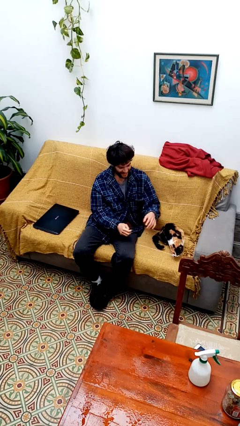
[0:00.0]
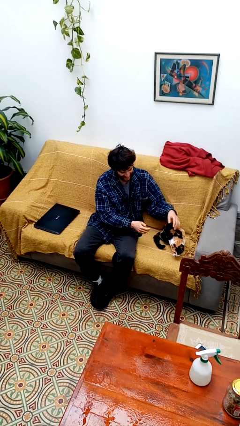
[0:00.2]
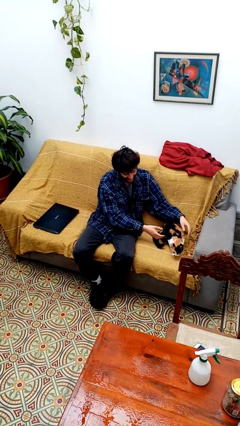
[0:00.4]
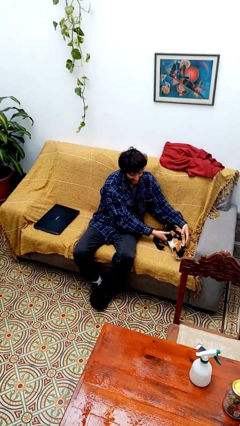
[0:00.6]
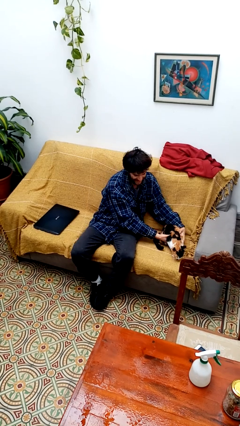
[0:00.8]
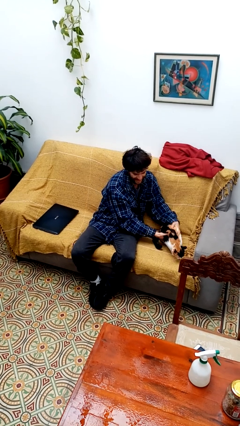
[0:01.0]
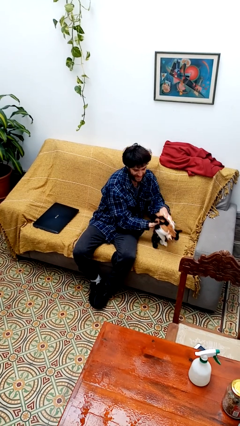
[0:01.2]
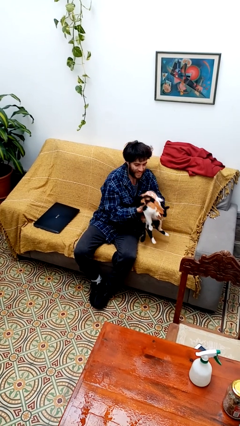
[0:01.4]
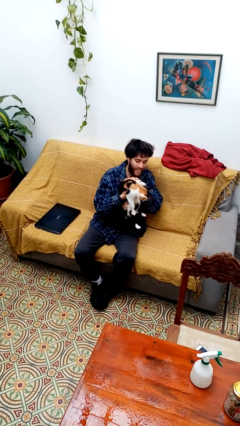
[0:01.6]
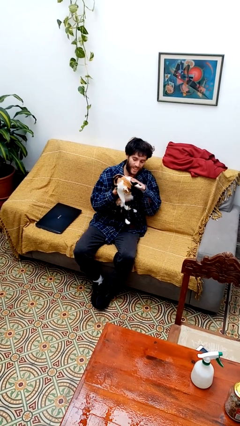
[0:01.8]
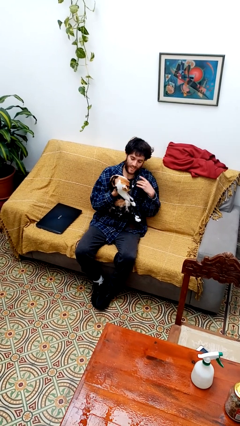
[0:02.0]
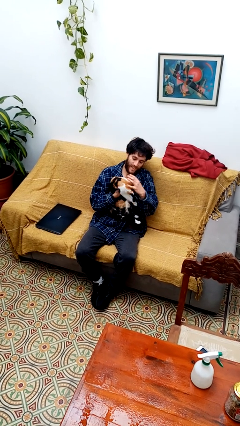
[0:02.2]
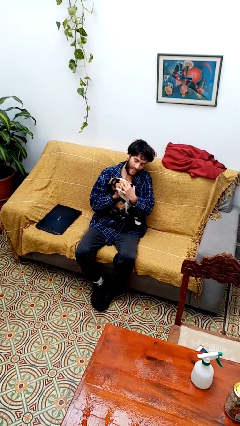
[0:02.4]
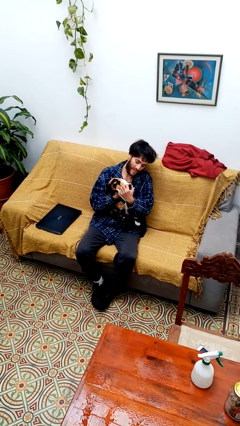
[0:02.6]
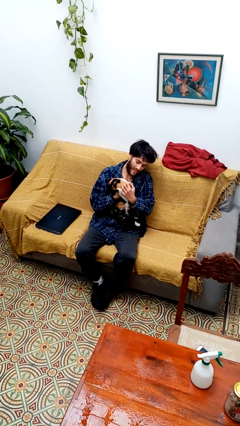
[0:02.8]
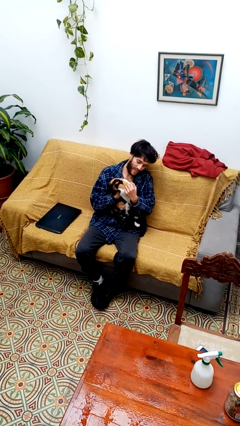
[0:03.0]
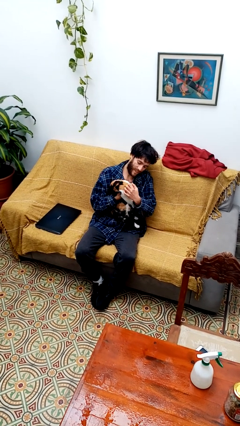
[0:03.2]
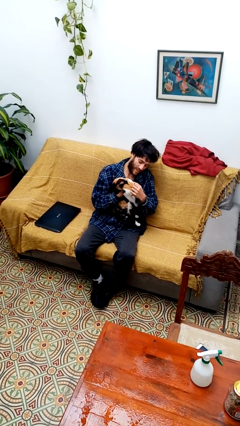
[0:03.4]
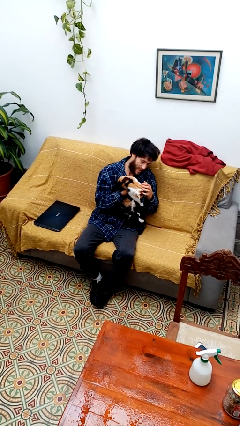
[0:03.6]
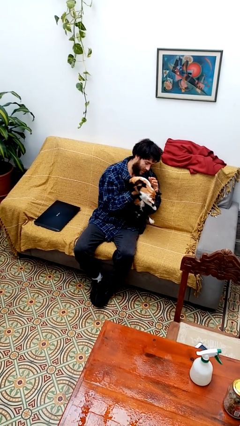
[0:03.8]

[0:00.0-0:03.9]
person hugs cat

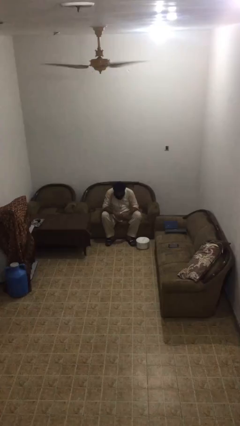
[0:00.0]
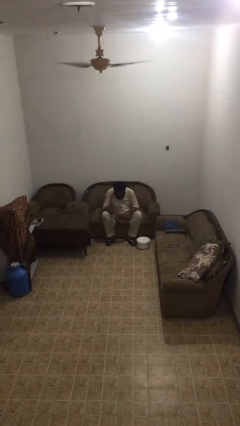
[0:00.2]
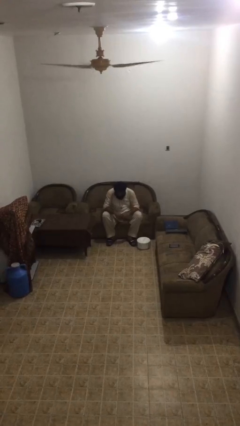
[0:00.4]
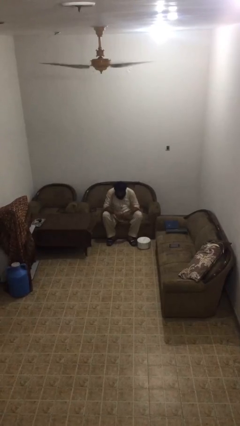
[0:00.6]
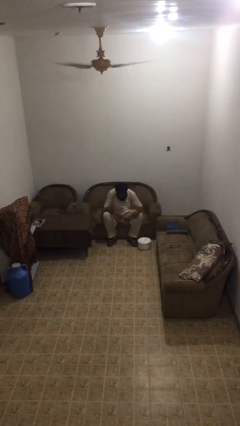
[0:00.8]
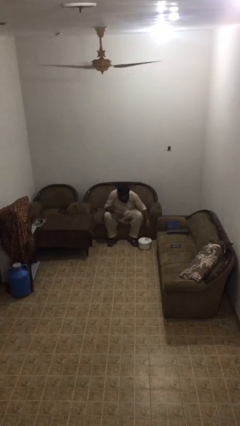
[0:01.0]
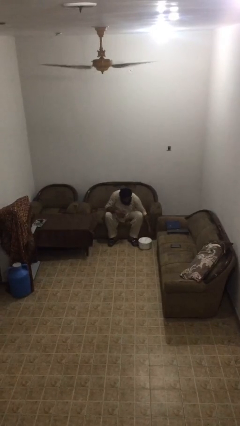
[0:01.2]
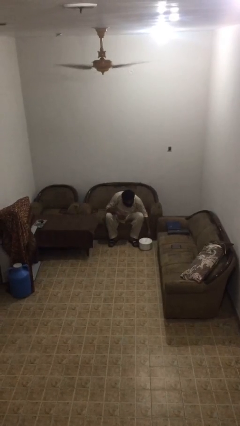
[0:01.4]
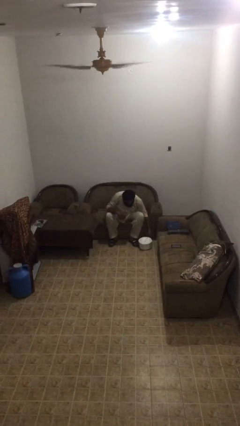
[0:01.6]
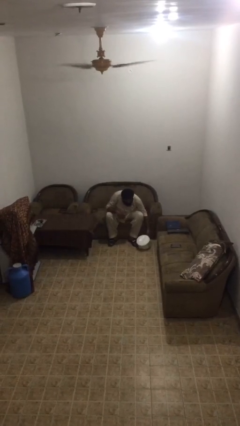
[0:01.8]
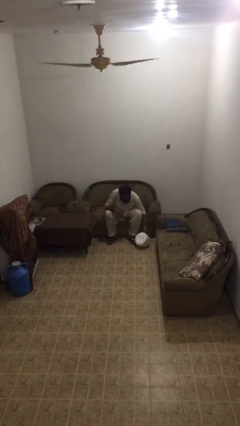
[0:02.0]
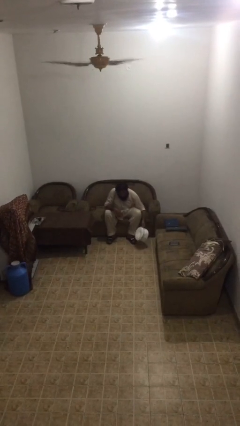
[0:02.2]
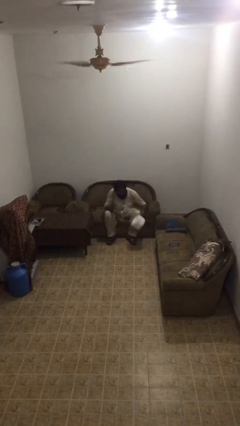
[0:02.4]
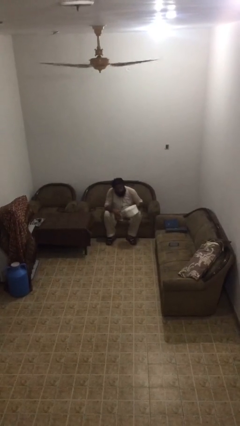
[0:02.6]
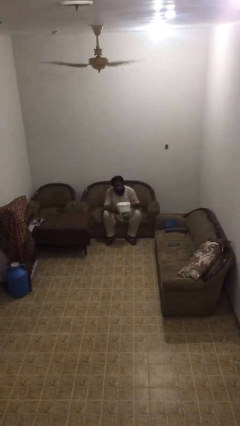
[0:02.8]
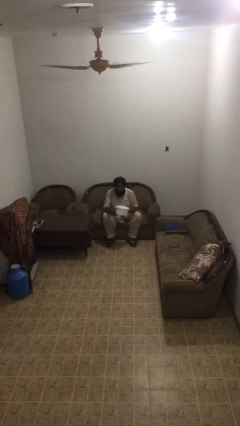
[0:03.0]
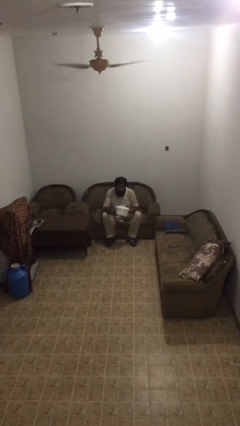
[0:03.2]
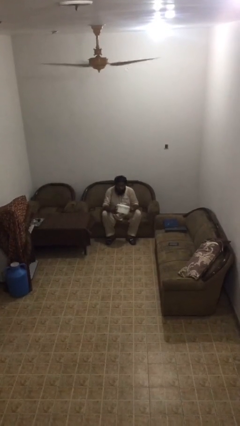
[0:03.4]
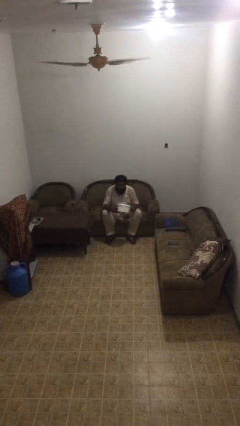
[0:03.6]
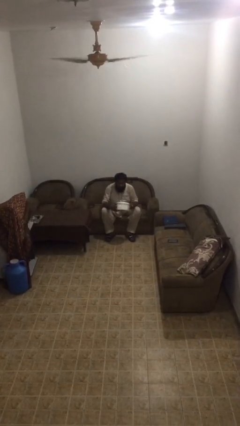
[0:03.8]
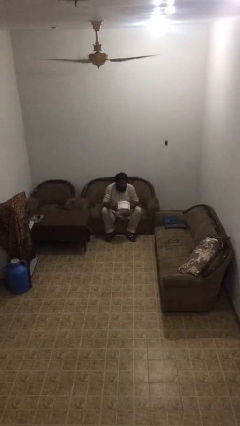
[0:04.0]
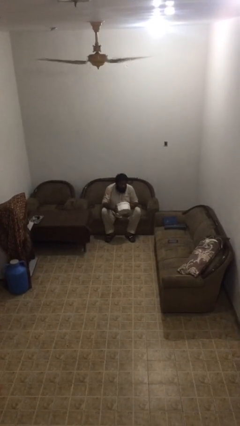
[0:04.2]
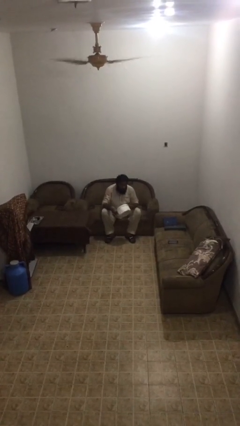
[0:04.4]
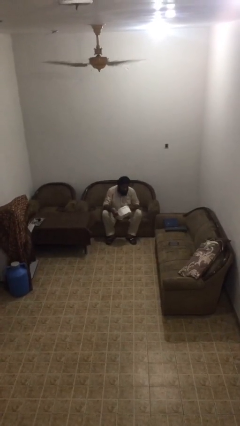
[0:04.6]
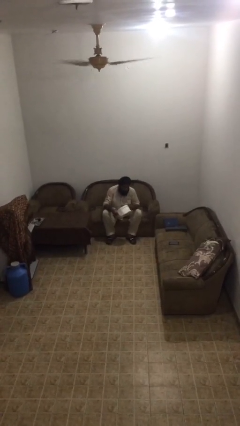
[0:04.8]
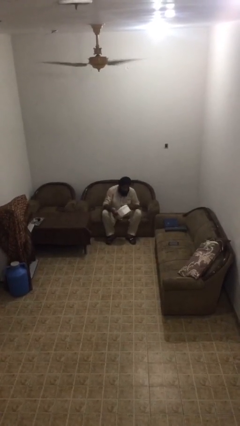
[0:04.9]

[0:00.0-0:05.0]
person picks up object from floor

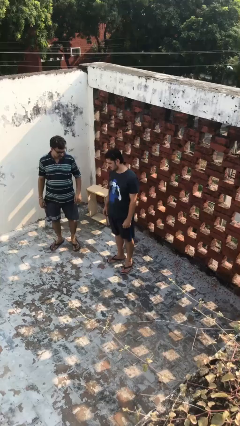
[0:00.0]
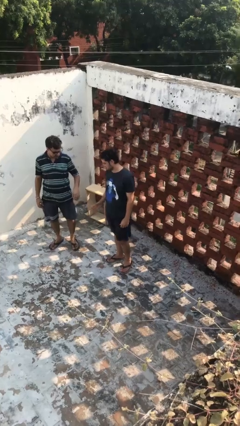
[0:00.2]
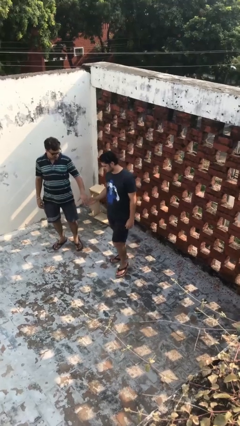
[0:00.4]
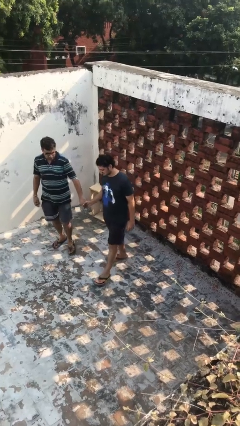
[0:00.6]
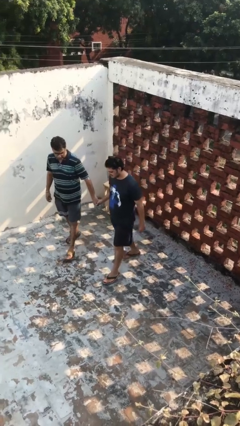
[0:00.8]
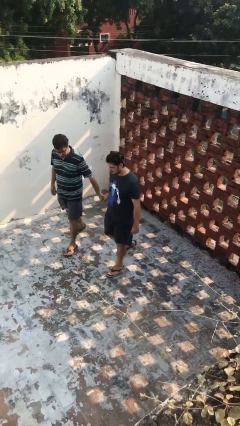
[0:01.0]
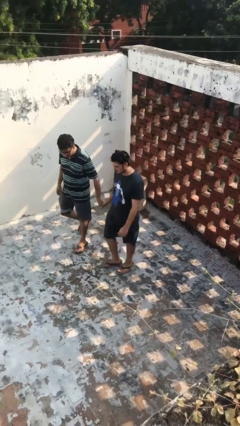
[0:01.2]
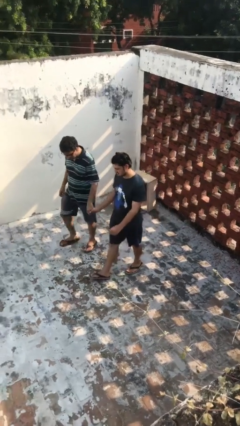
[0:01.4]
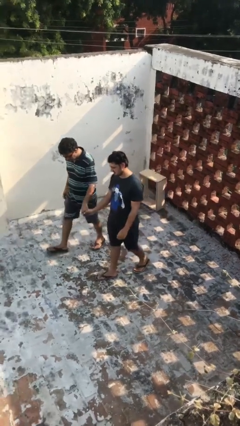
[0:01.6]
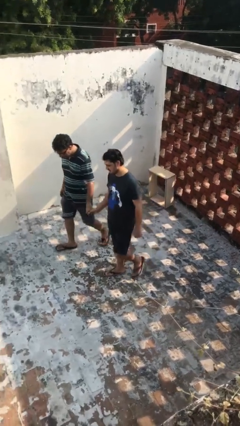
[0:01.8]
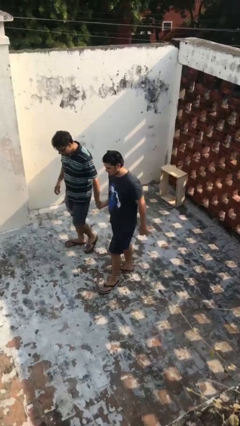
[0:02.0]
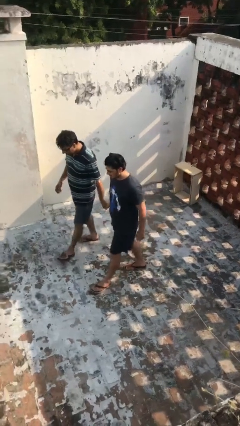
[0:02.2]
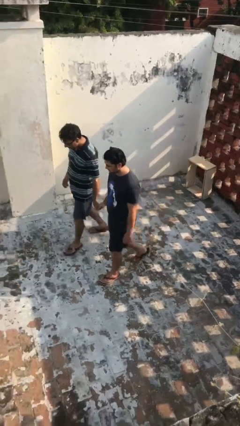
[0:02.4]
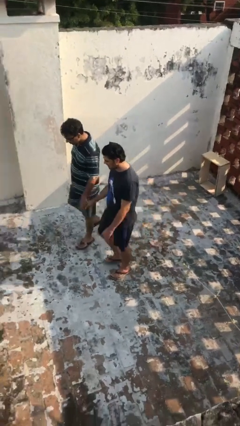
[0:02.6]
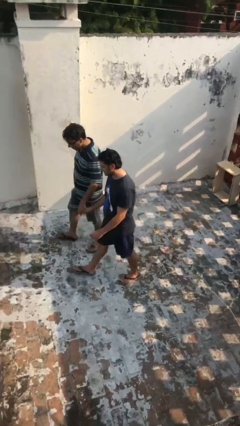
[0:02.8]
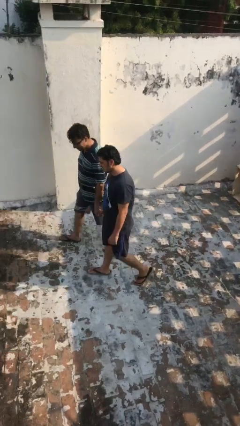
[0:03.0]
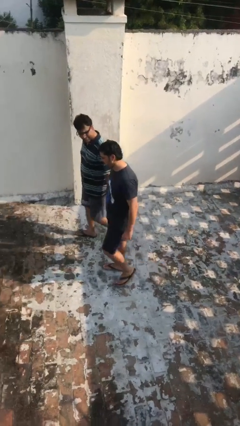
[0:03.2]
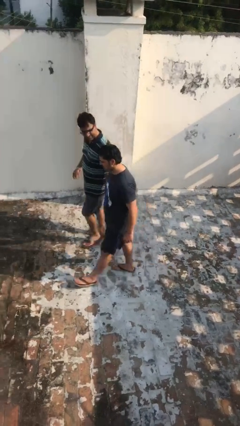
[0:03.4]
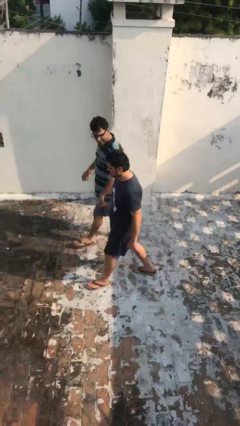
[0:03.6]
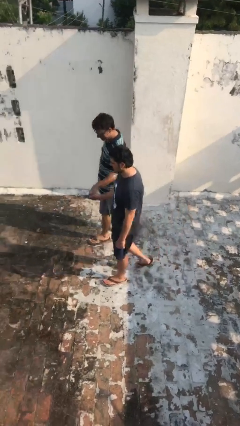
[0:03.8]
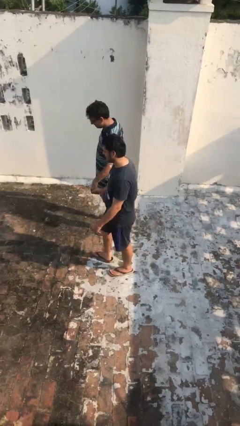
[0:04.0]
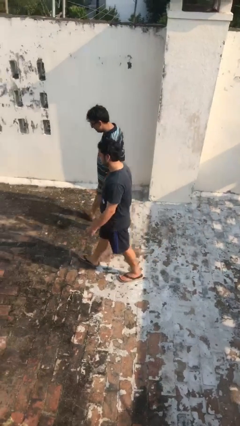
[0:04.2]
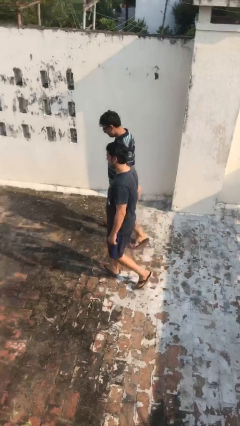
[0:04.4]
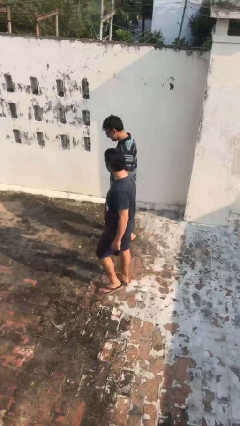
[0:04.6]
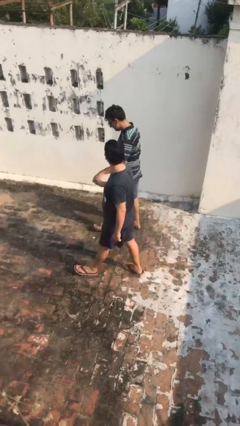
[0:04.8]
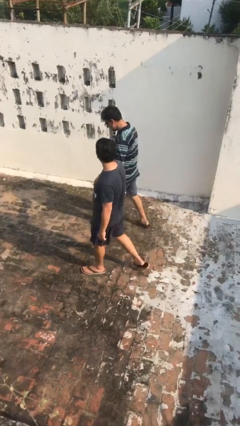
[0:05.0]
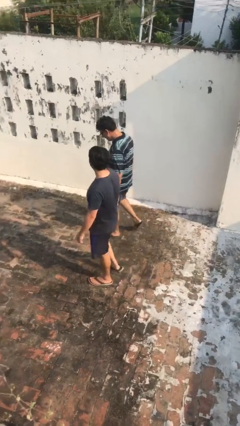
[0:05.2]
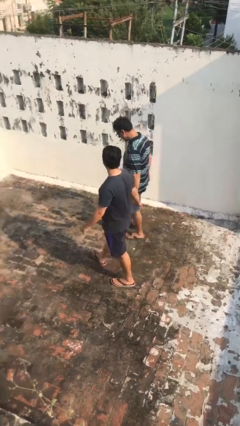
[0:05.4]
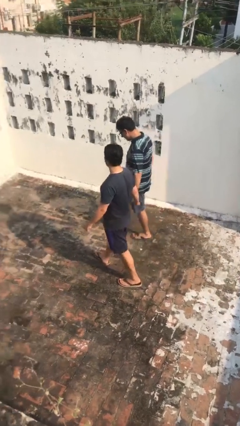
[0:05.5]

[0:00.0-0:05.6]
person holds hand

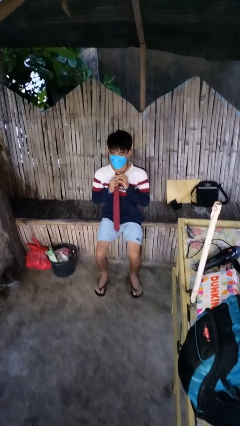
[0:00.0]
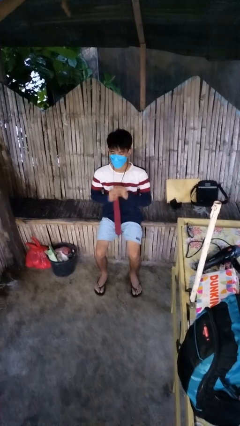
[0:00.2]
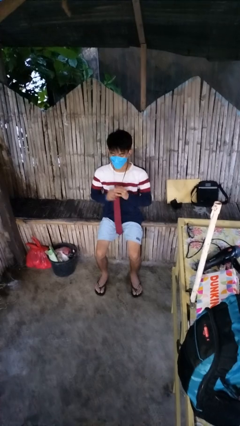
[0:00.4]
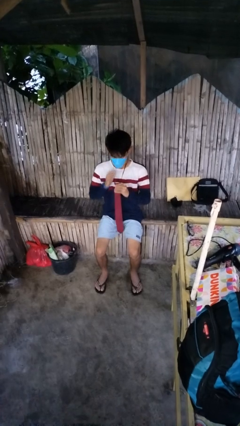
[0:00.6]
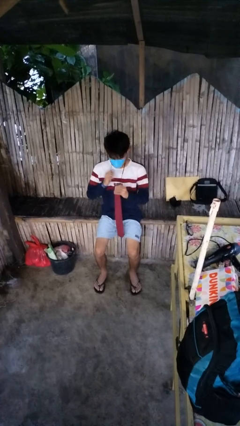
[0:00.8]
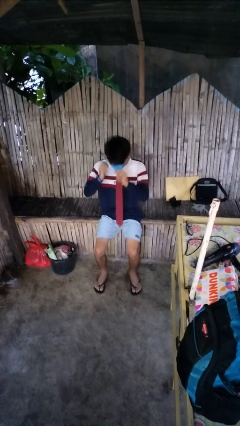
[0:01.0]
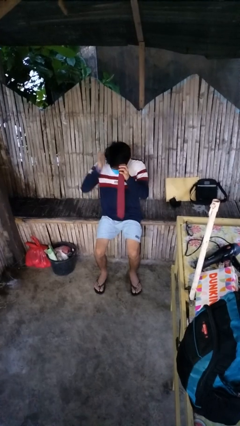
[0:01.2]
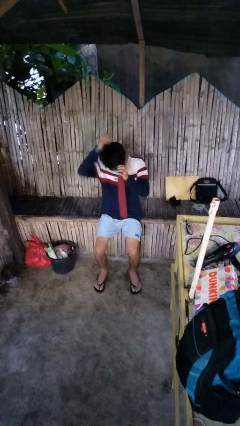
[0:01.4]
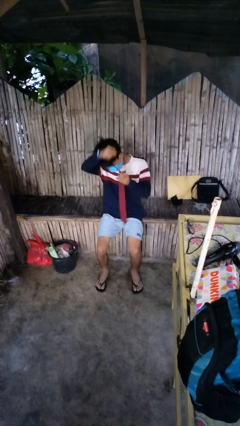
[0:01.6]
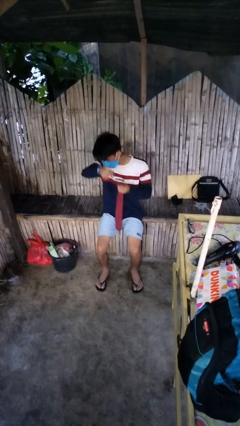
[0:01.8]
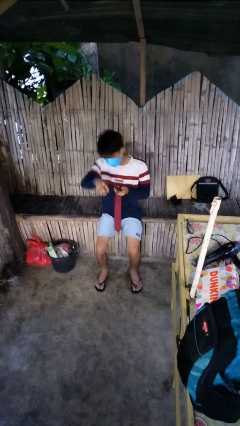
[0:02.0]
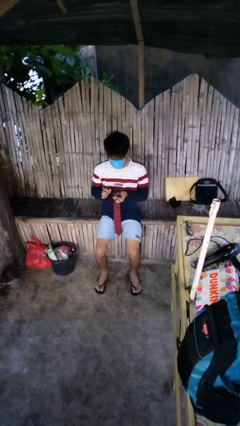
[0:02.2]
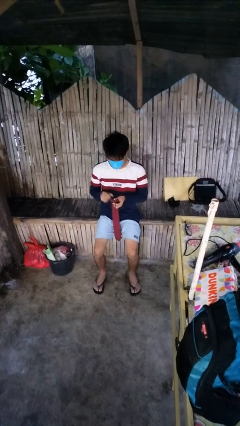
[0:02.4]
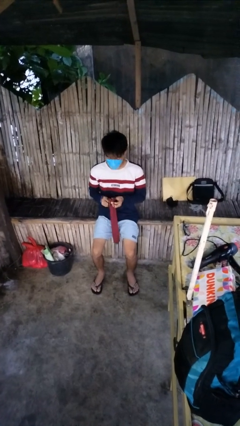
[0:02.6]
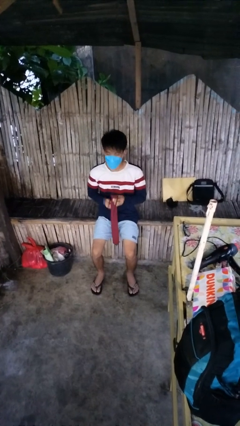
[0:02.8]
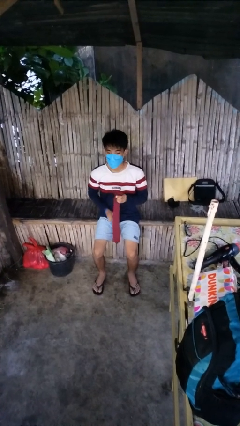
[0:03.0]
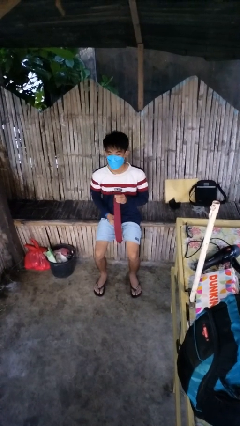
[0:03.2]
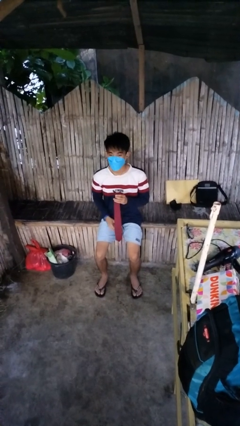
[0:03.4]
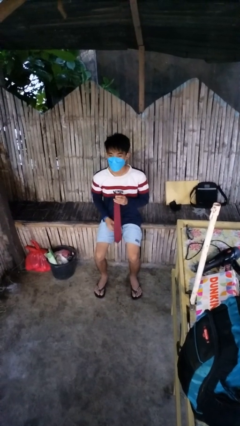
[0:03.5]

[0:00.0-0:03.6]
person takes off necktie
